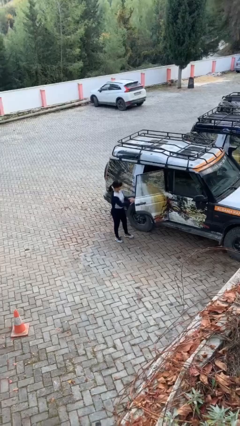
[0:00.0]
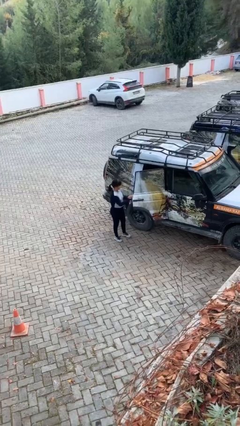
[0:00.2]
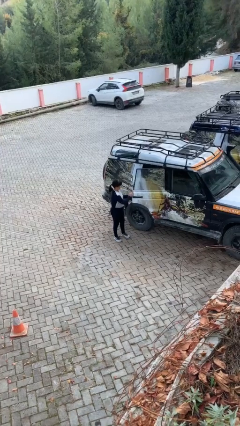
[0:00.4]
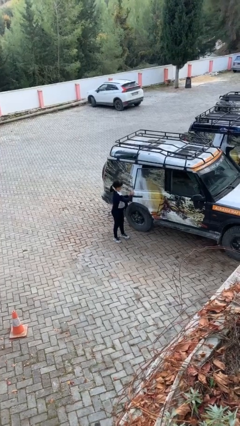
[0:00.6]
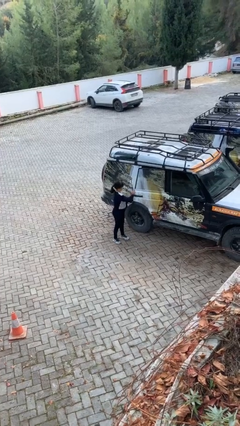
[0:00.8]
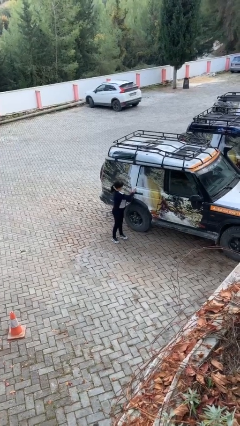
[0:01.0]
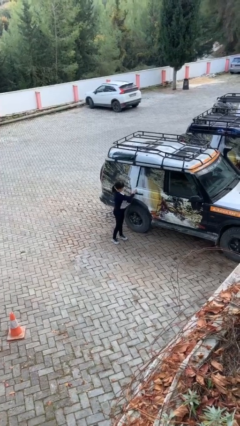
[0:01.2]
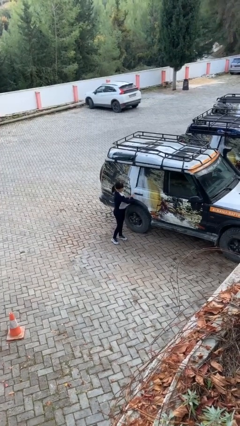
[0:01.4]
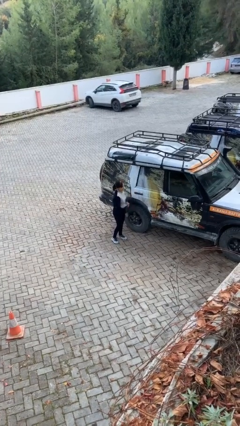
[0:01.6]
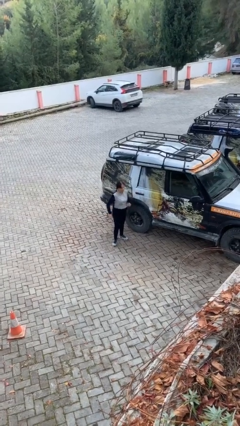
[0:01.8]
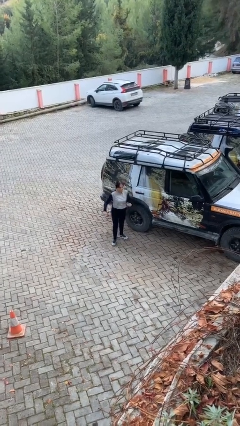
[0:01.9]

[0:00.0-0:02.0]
person closes car door

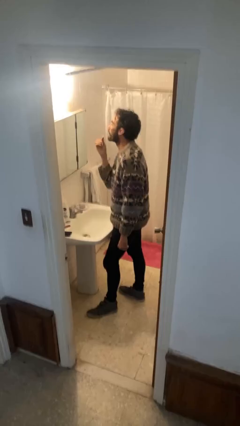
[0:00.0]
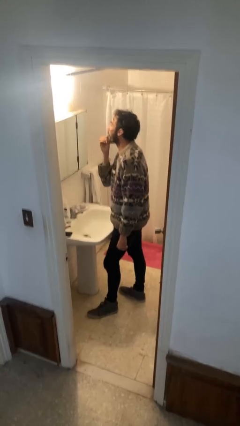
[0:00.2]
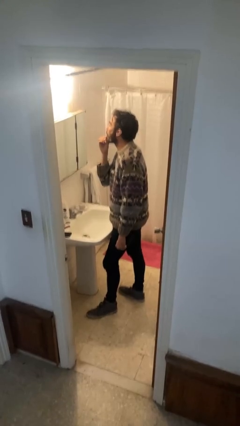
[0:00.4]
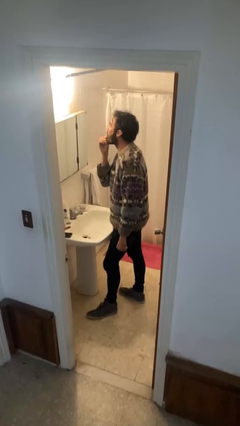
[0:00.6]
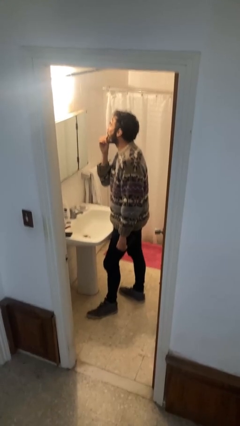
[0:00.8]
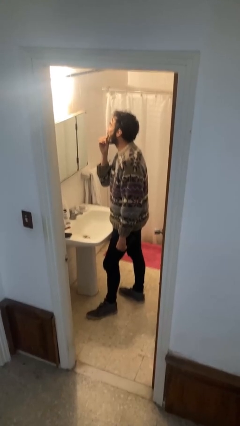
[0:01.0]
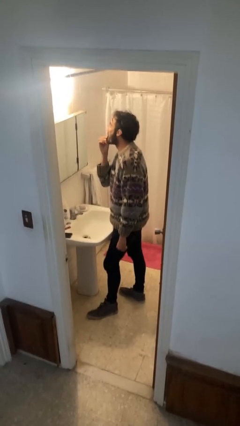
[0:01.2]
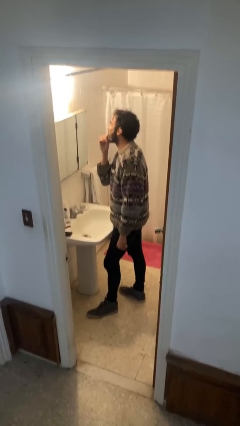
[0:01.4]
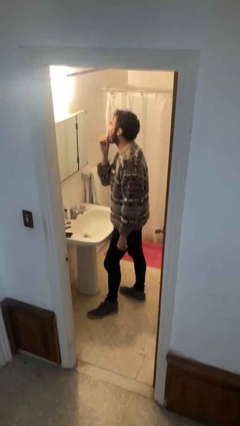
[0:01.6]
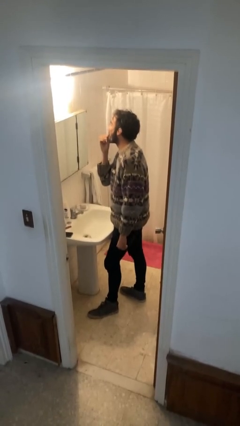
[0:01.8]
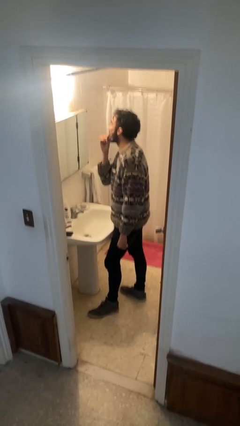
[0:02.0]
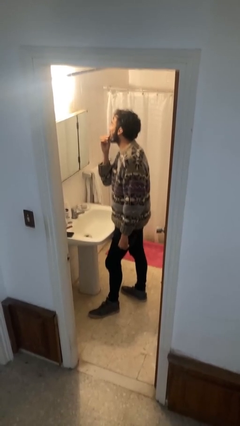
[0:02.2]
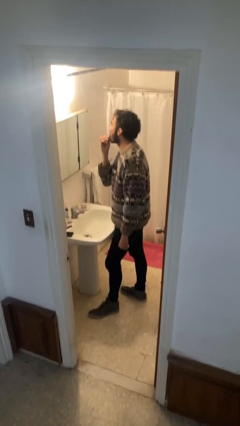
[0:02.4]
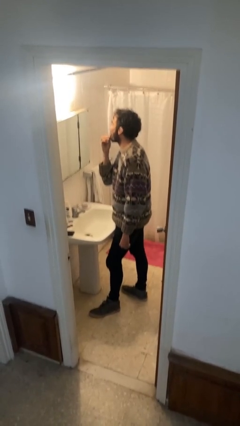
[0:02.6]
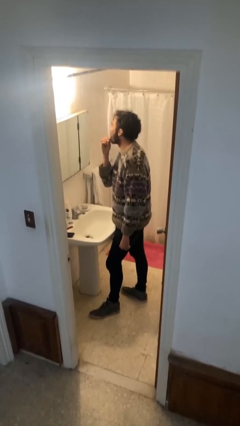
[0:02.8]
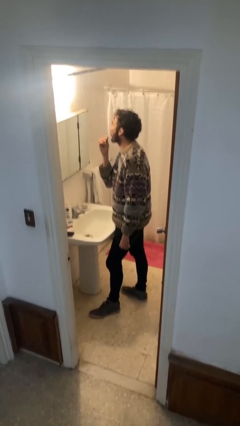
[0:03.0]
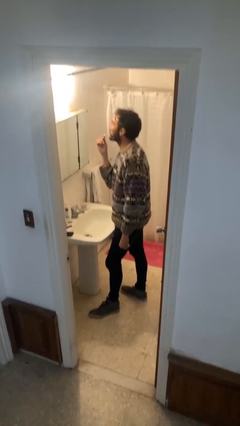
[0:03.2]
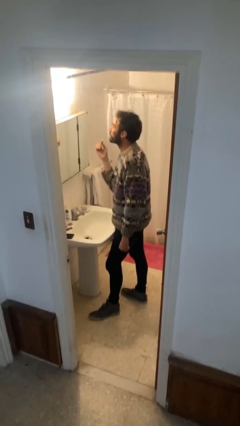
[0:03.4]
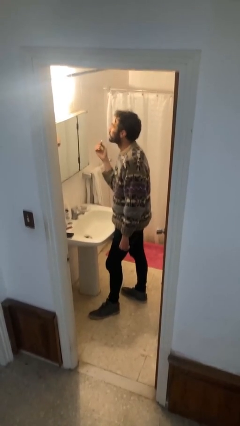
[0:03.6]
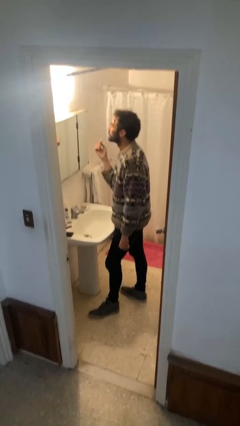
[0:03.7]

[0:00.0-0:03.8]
person applies lip makeup

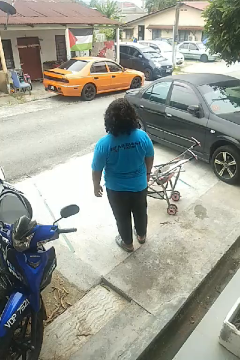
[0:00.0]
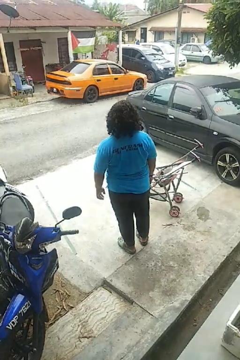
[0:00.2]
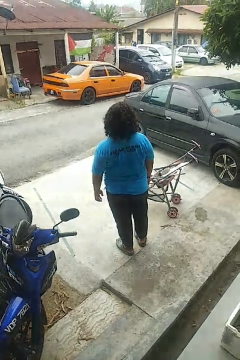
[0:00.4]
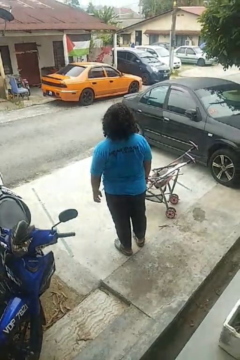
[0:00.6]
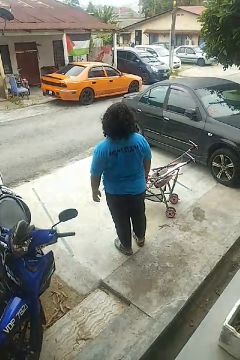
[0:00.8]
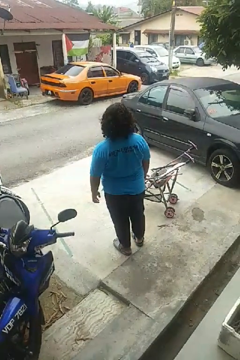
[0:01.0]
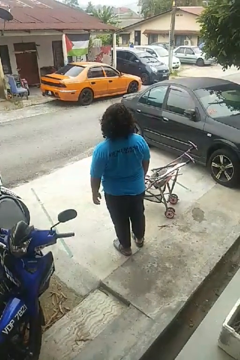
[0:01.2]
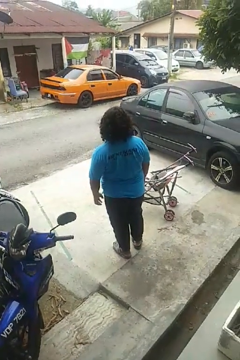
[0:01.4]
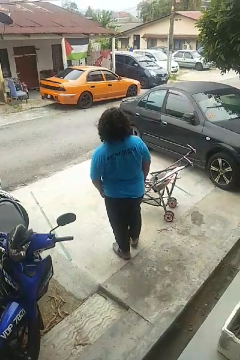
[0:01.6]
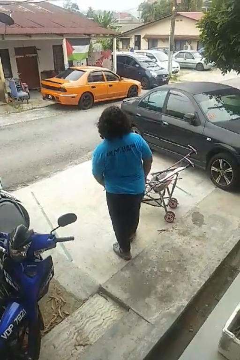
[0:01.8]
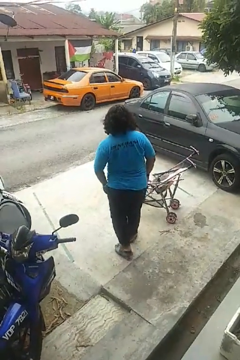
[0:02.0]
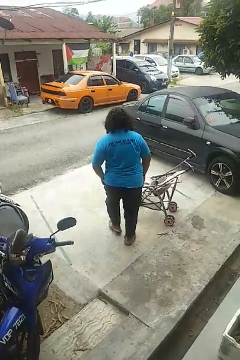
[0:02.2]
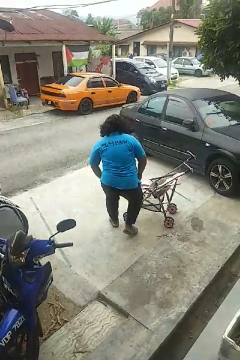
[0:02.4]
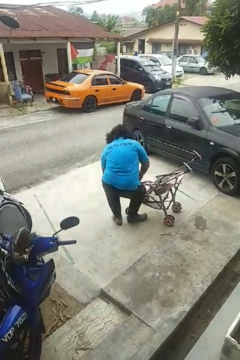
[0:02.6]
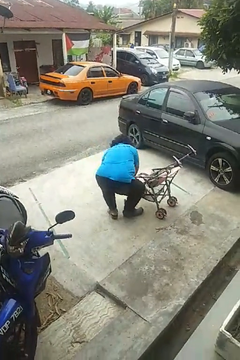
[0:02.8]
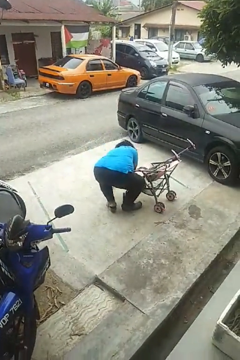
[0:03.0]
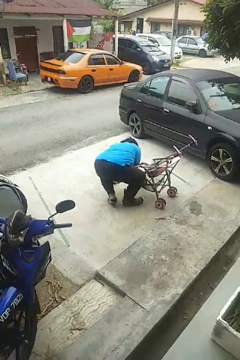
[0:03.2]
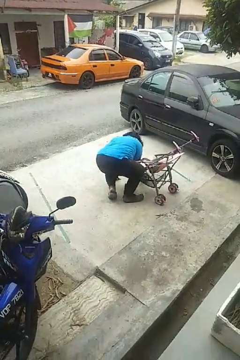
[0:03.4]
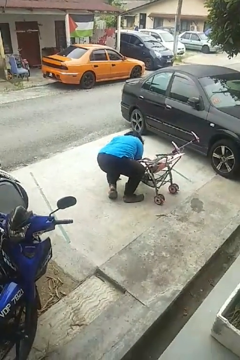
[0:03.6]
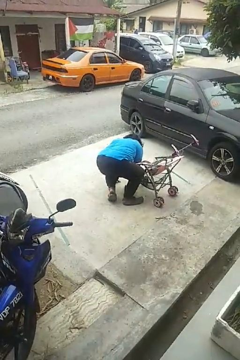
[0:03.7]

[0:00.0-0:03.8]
person trips on object on floor

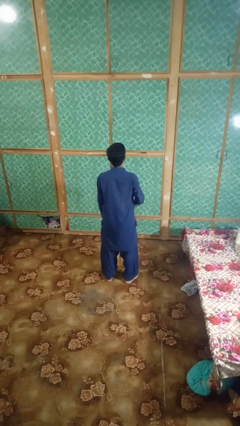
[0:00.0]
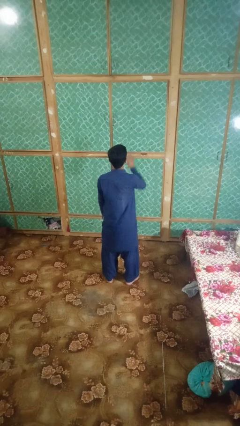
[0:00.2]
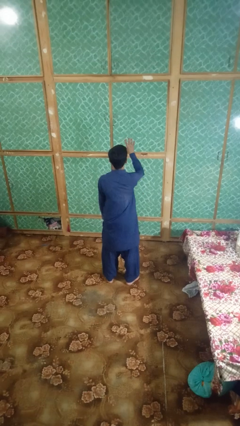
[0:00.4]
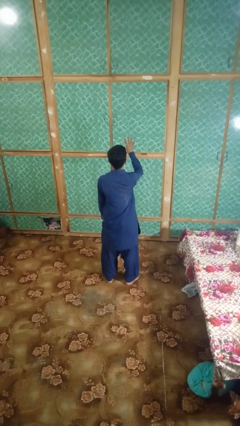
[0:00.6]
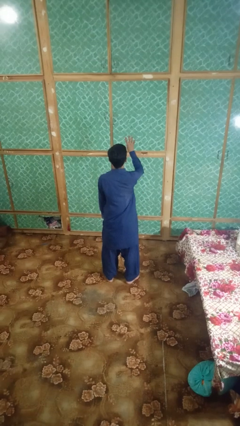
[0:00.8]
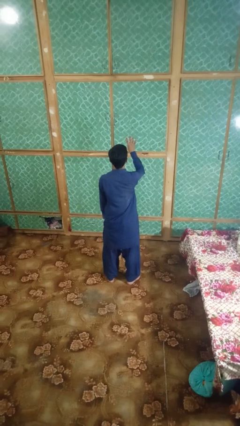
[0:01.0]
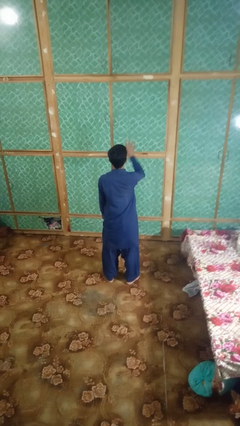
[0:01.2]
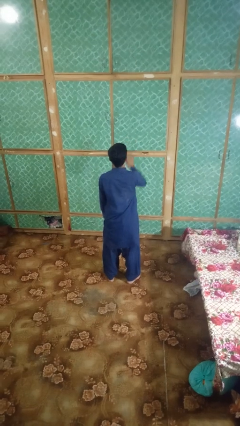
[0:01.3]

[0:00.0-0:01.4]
person gestures number four

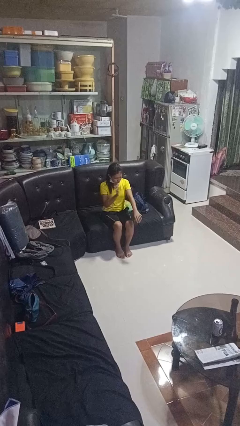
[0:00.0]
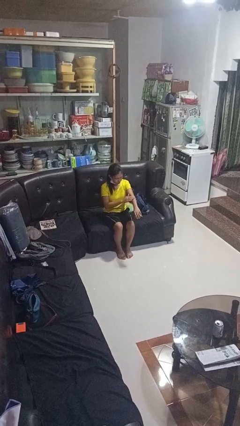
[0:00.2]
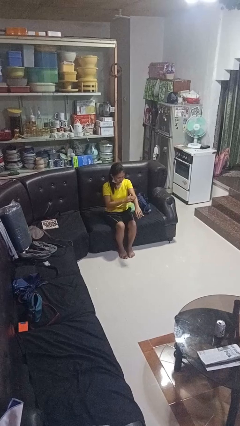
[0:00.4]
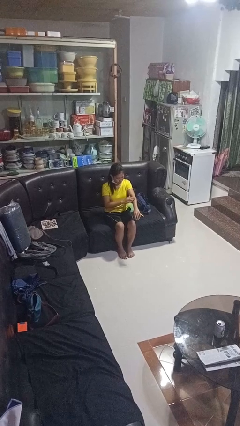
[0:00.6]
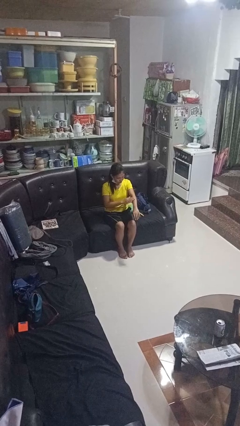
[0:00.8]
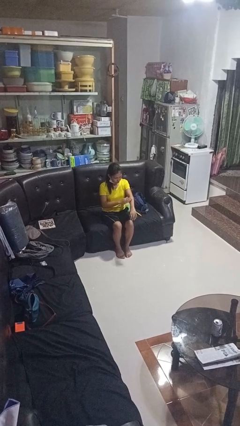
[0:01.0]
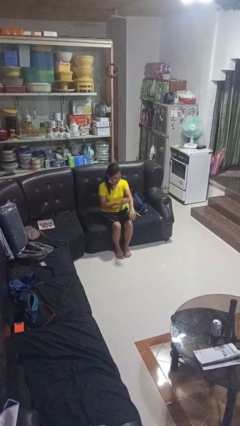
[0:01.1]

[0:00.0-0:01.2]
person swats bug

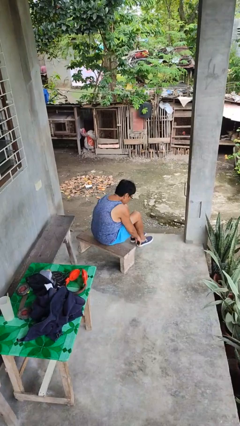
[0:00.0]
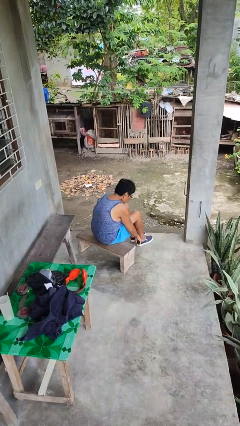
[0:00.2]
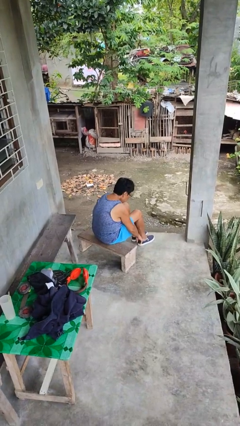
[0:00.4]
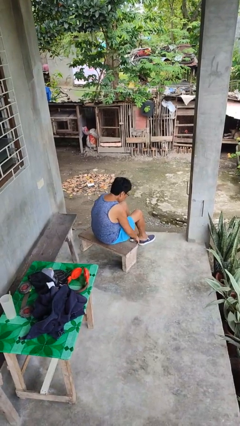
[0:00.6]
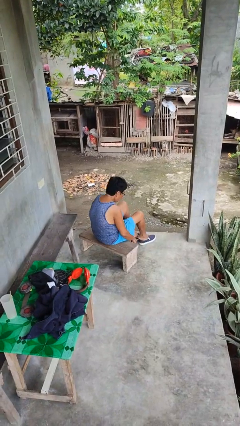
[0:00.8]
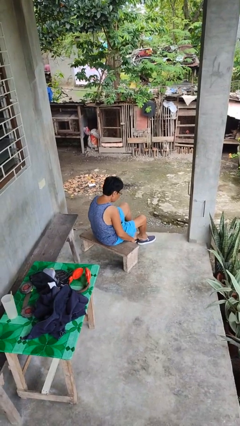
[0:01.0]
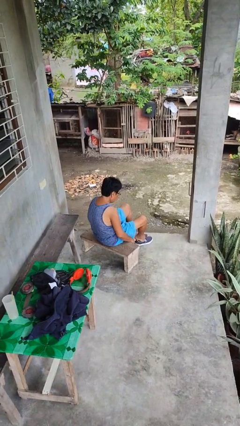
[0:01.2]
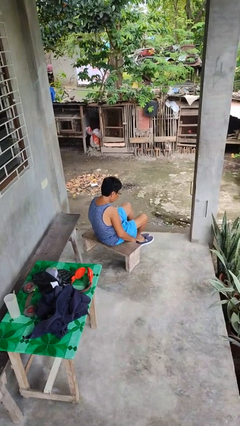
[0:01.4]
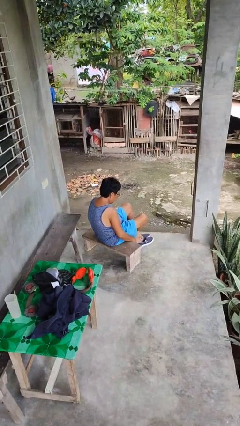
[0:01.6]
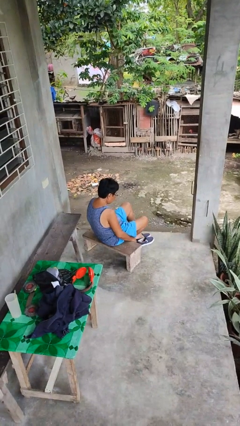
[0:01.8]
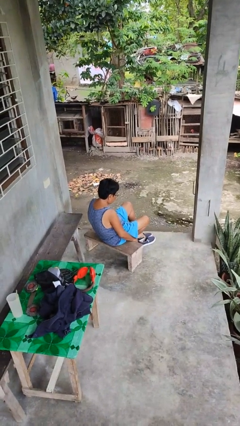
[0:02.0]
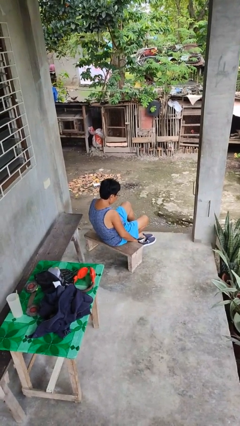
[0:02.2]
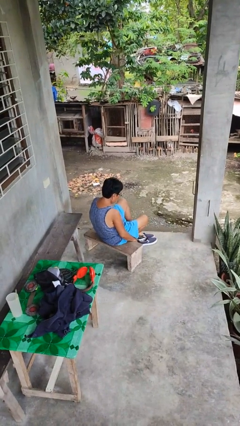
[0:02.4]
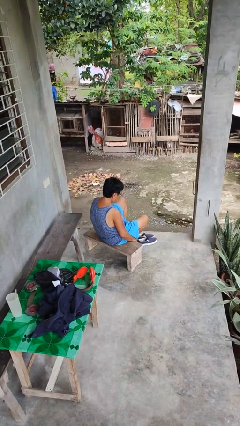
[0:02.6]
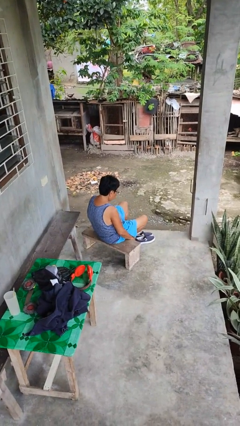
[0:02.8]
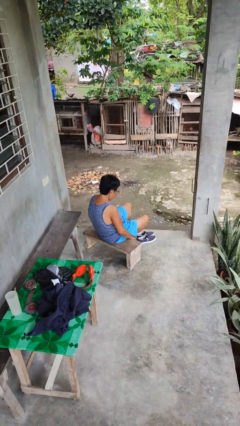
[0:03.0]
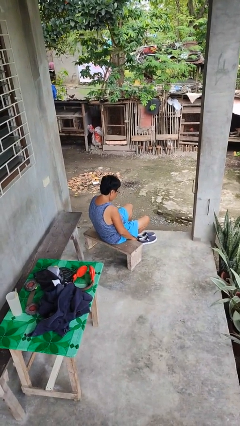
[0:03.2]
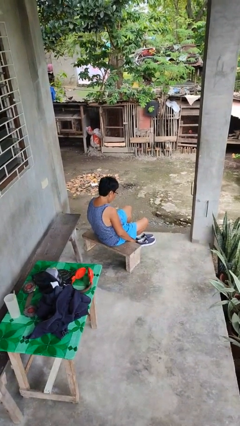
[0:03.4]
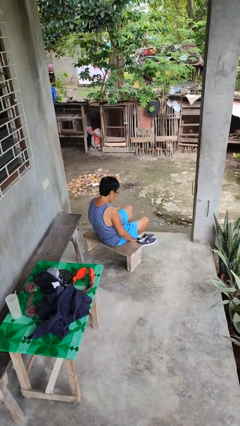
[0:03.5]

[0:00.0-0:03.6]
person takes off shoes

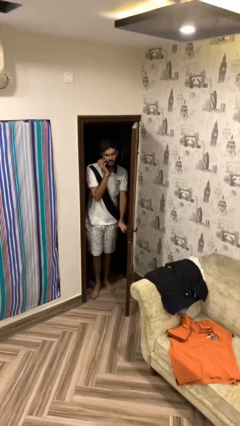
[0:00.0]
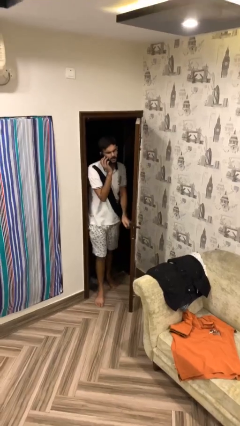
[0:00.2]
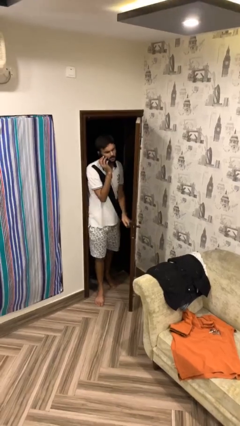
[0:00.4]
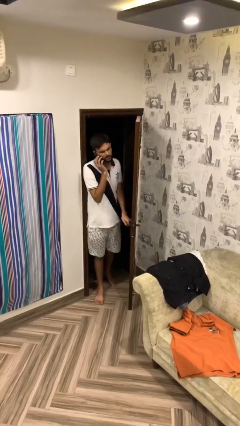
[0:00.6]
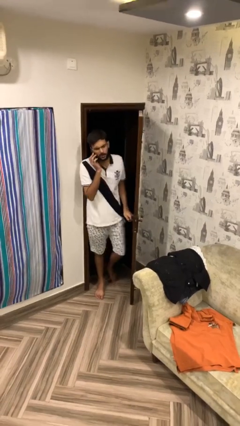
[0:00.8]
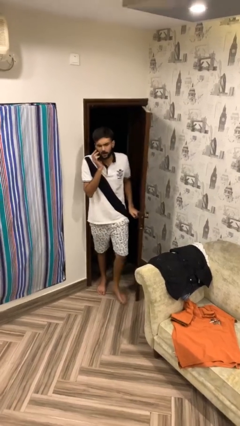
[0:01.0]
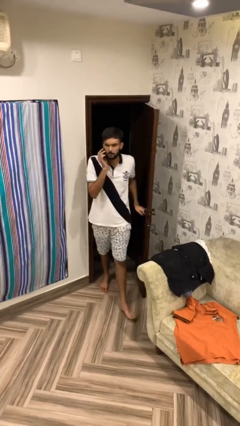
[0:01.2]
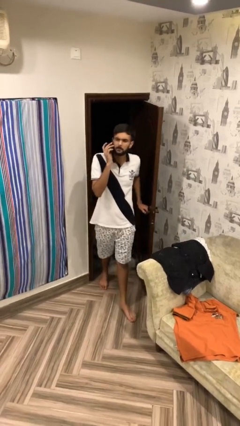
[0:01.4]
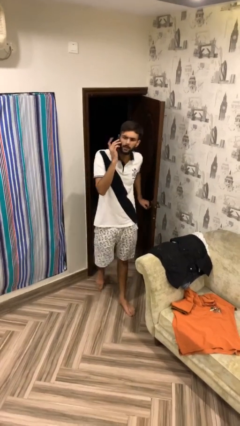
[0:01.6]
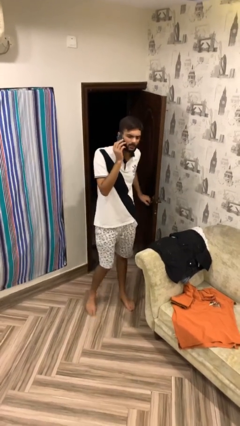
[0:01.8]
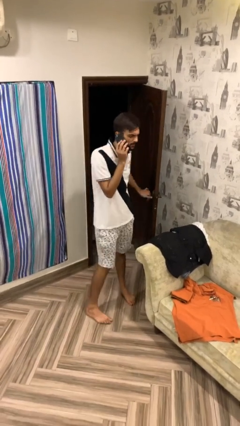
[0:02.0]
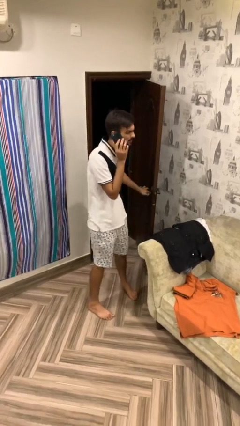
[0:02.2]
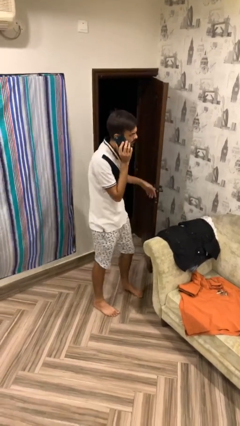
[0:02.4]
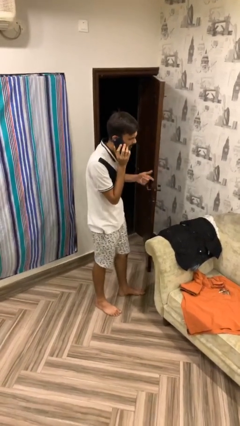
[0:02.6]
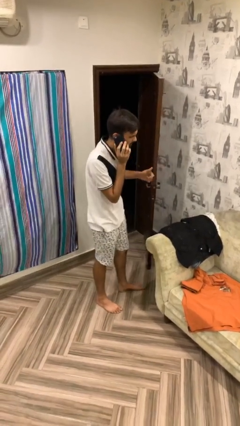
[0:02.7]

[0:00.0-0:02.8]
person enters scene through structure
